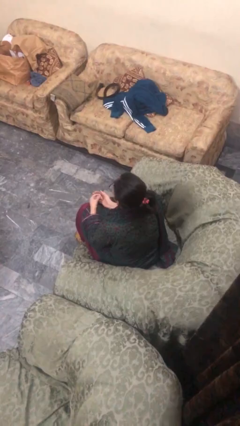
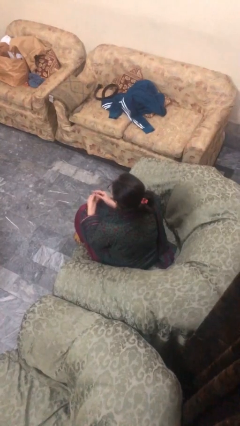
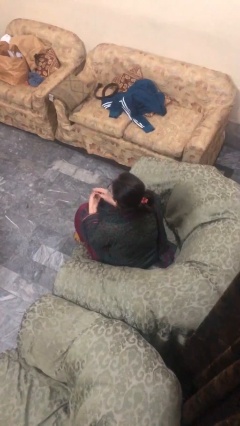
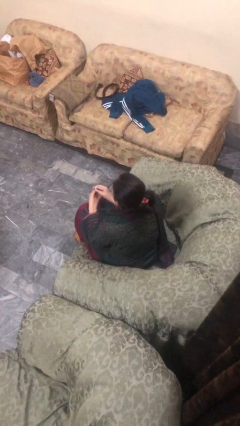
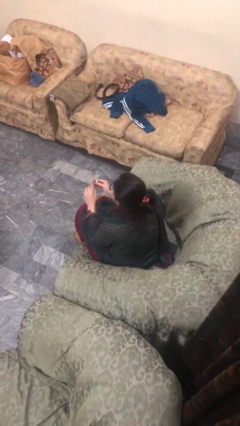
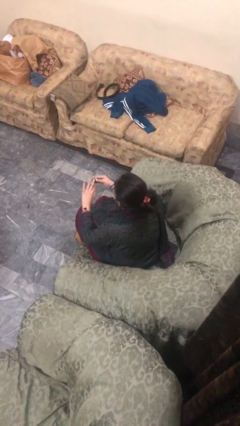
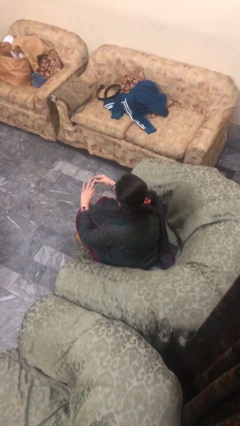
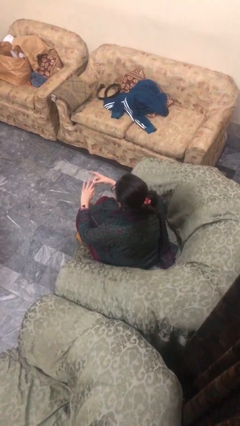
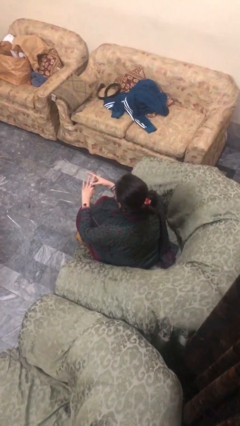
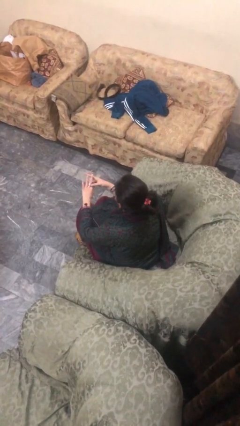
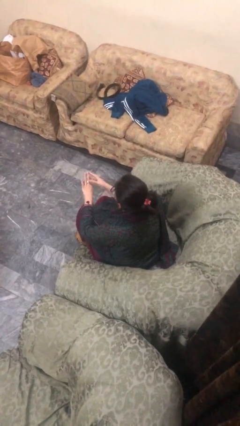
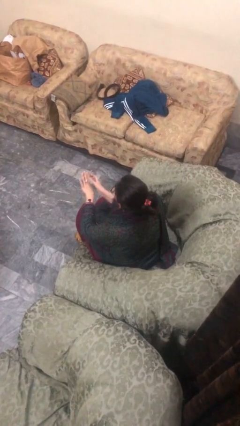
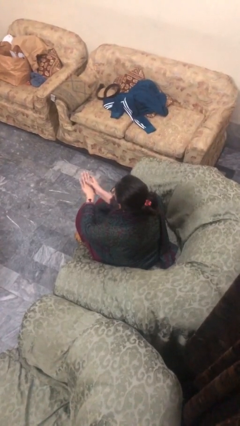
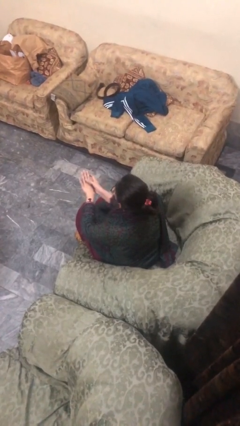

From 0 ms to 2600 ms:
person puts on ring

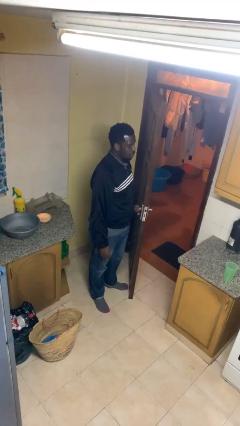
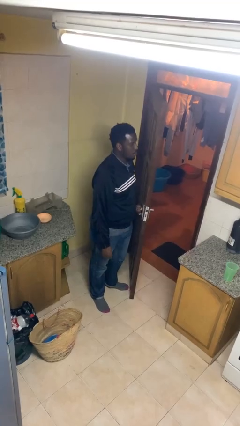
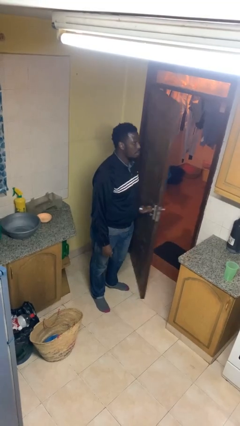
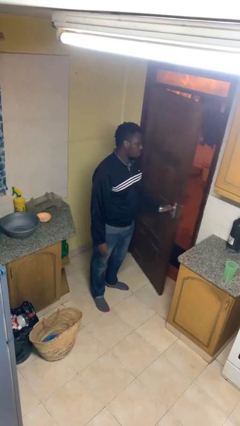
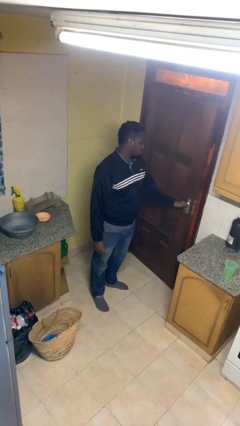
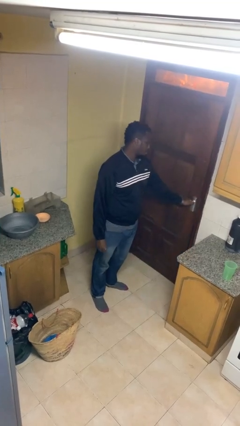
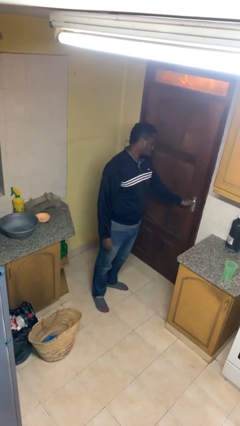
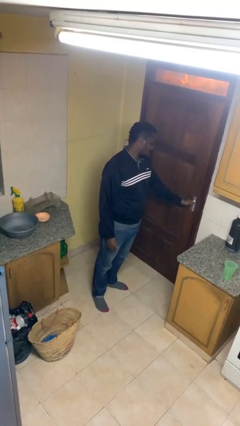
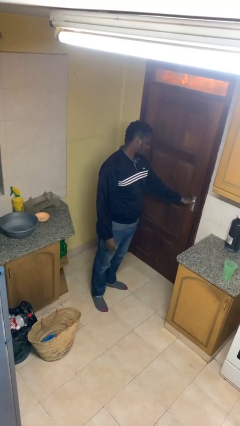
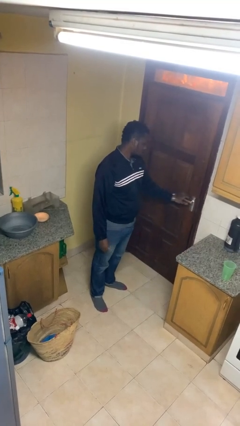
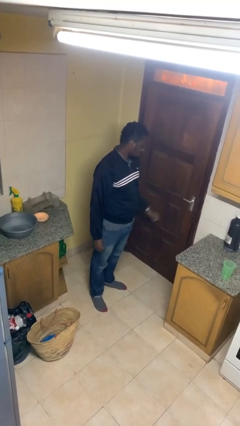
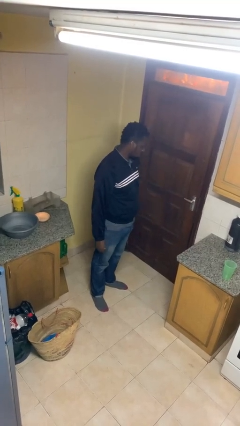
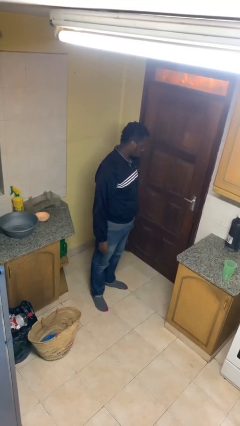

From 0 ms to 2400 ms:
person closes facility door

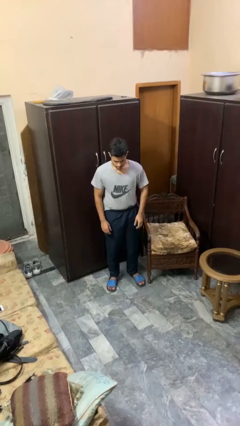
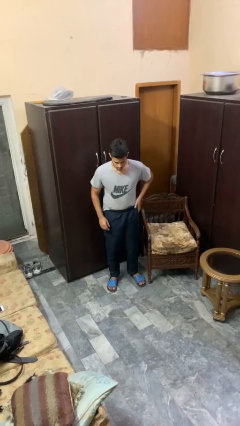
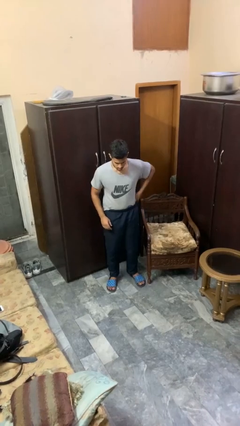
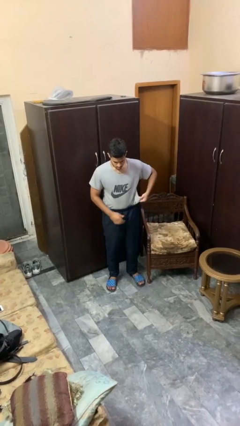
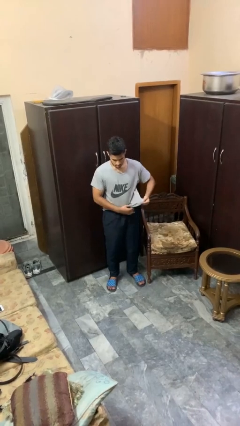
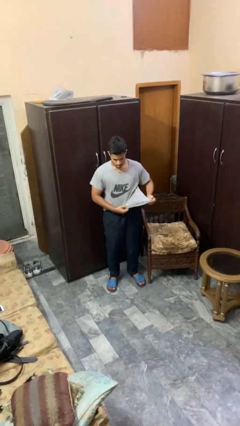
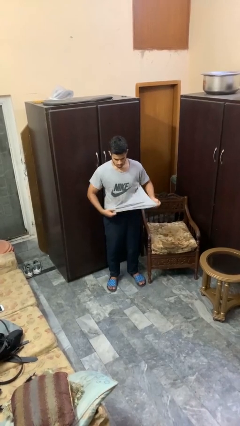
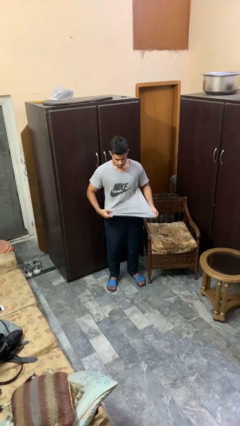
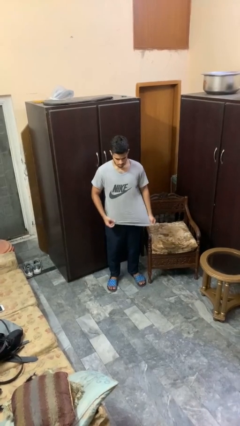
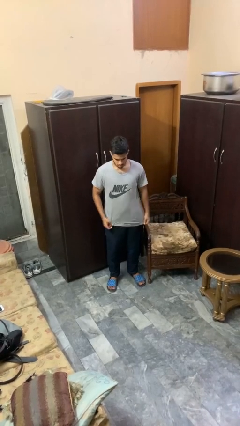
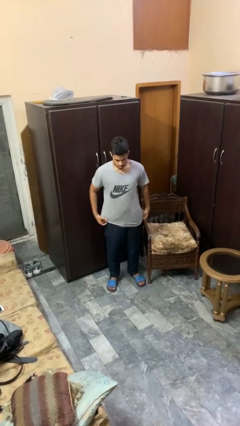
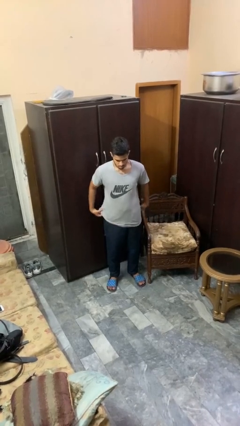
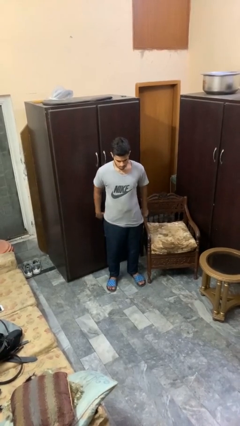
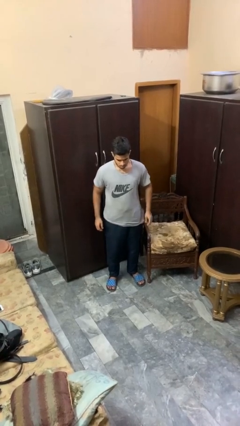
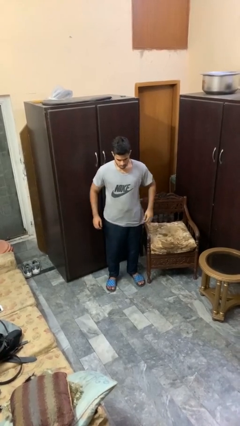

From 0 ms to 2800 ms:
person untucks shirt

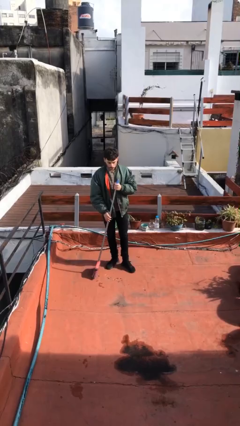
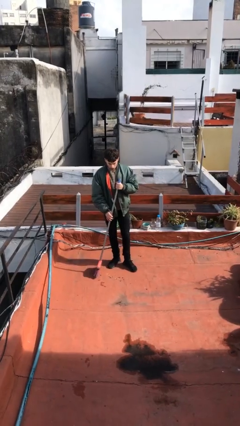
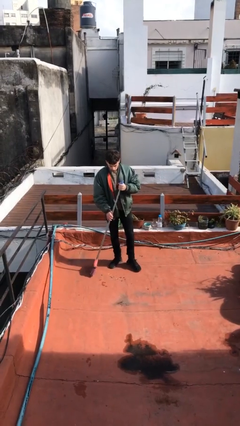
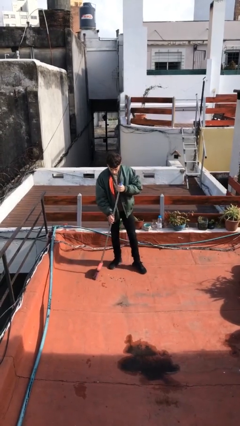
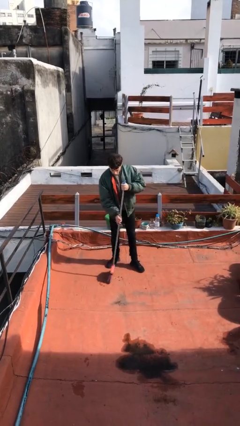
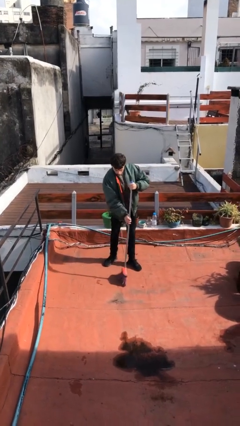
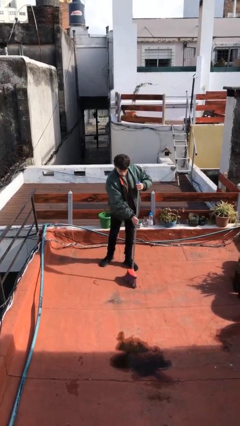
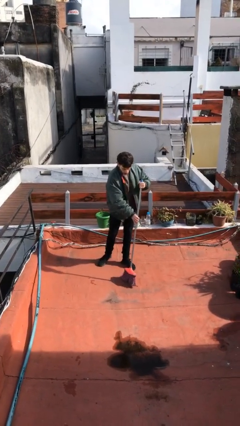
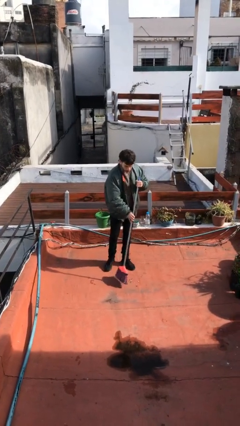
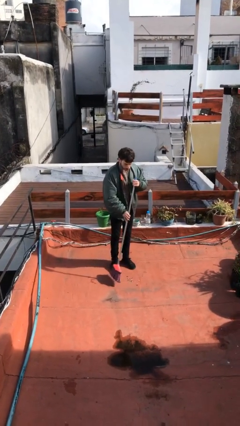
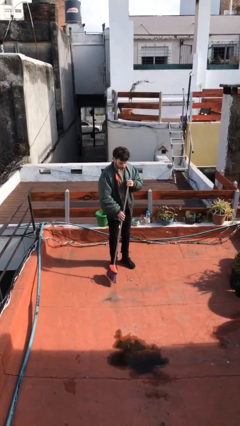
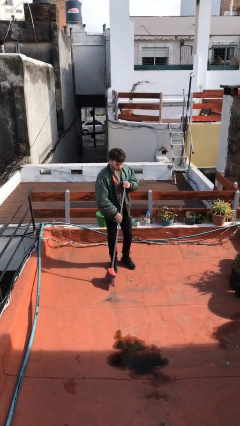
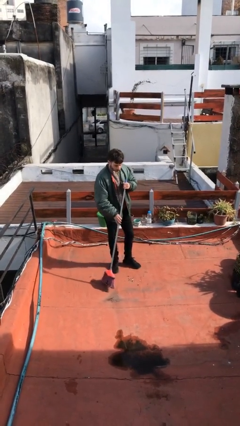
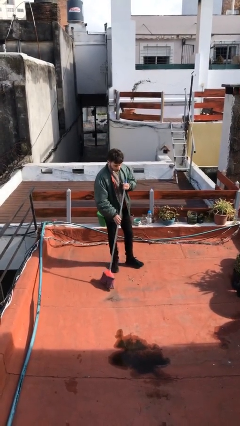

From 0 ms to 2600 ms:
person sweeps floor

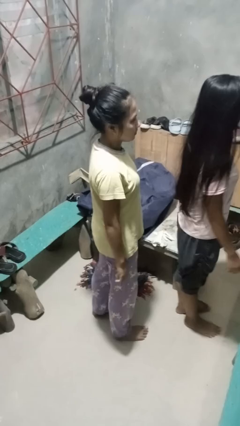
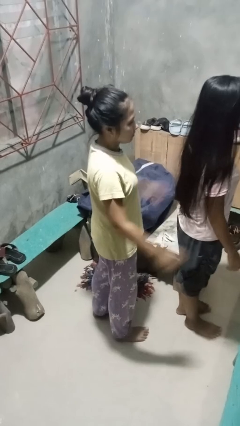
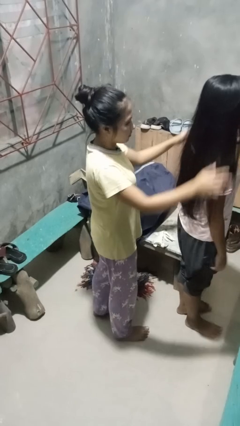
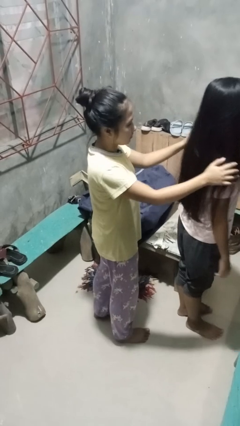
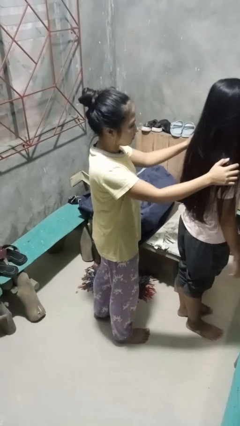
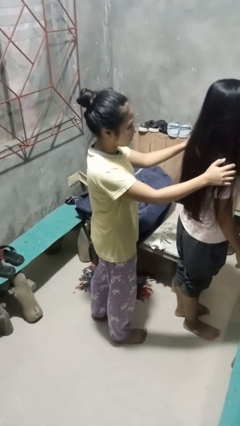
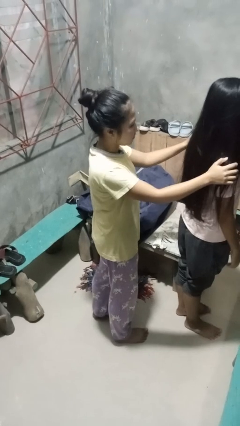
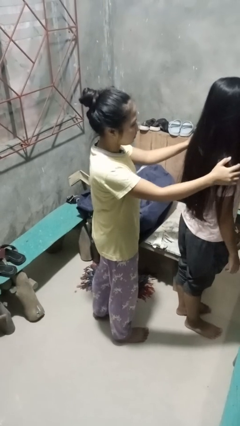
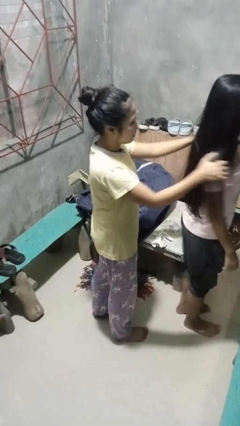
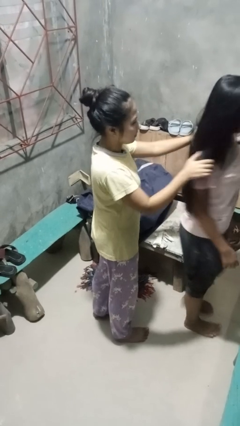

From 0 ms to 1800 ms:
person grabs person by shoulder

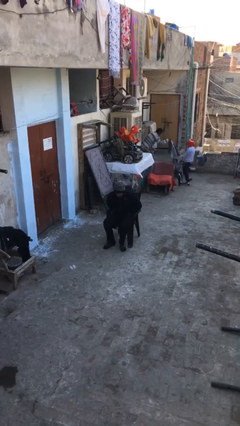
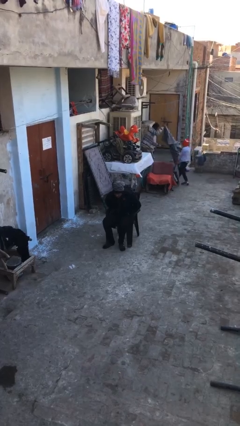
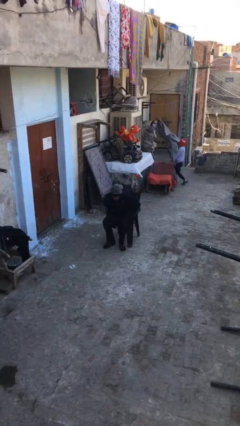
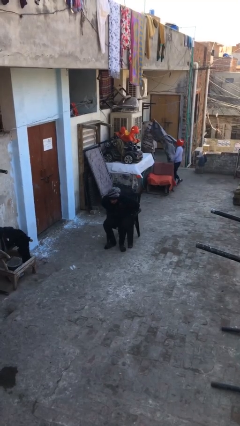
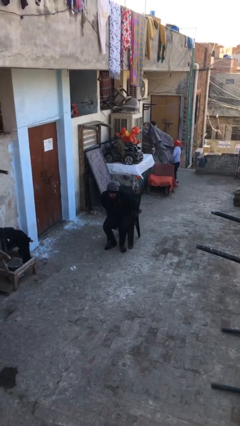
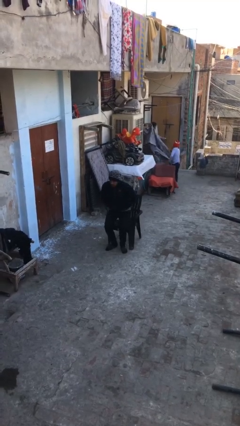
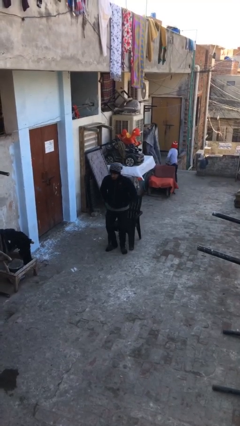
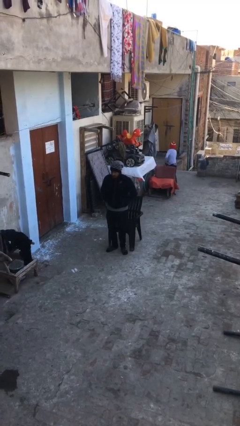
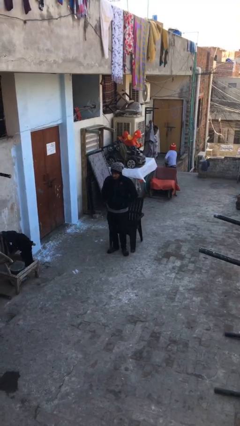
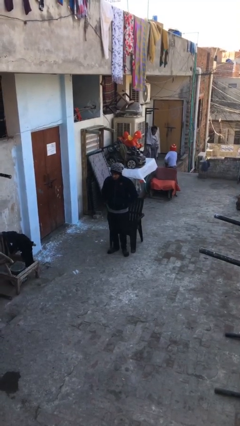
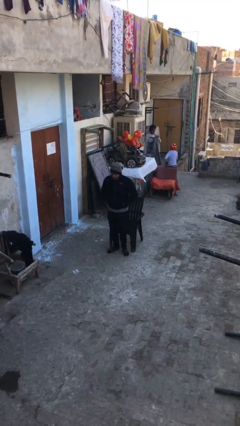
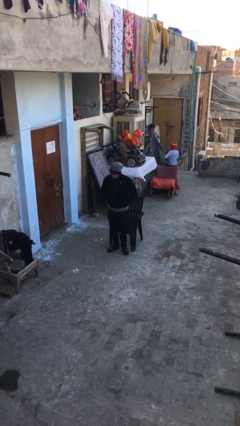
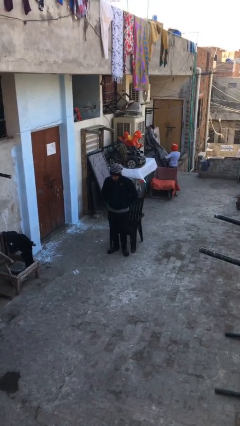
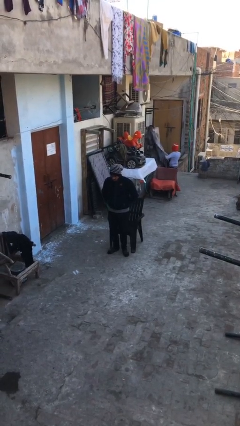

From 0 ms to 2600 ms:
person stands up

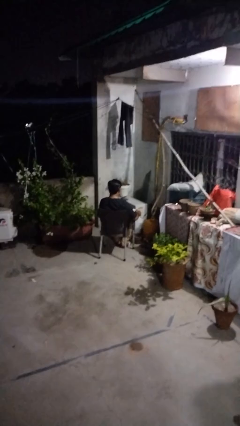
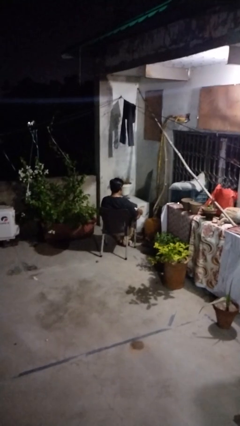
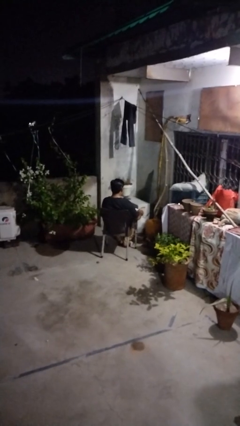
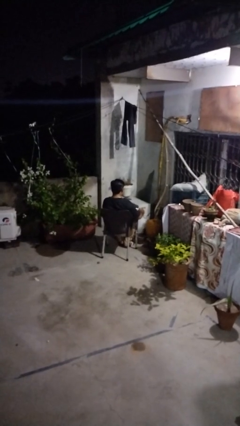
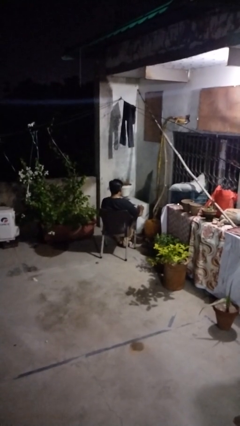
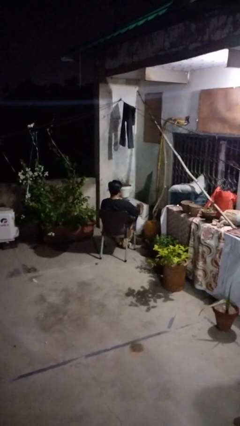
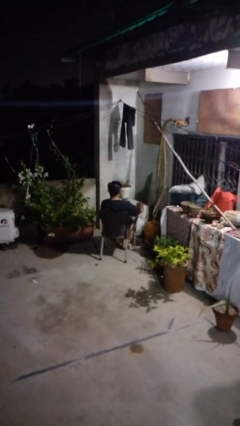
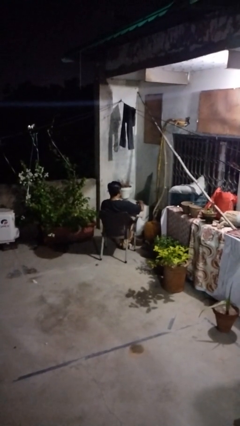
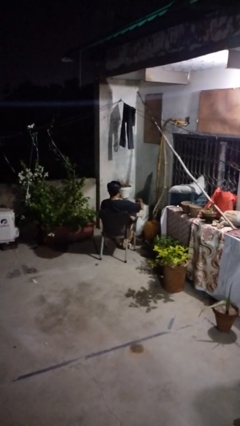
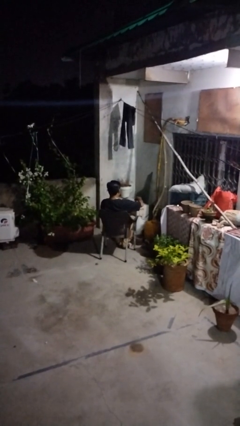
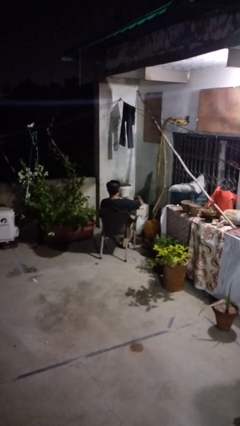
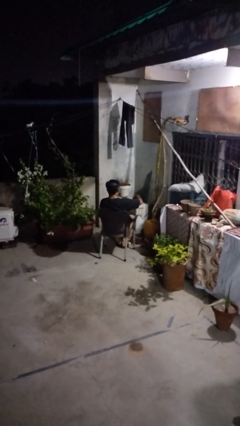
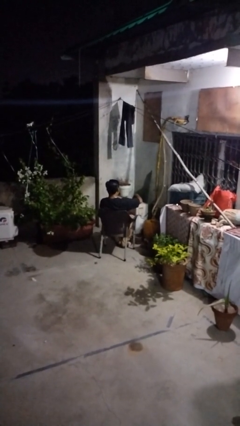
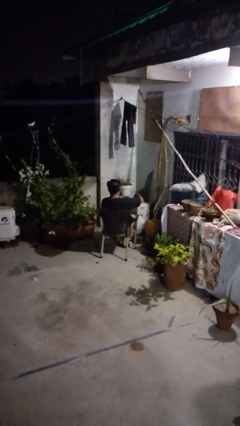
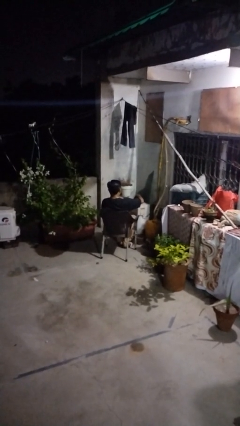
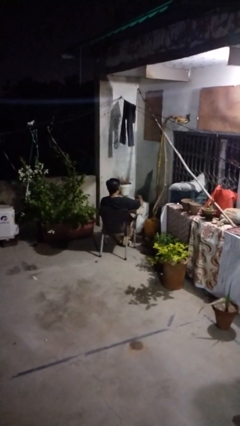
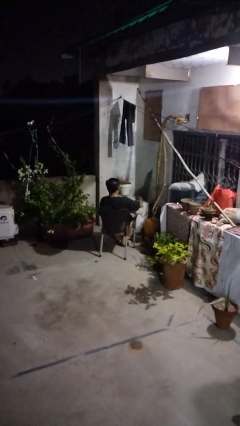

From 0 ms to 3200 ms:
person pours coffee into mug
